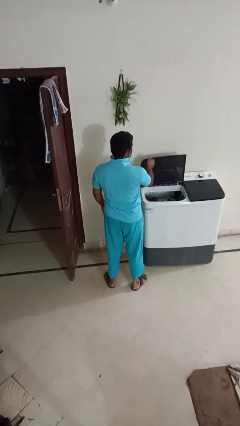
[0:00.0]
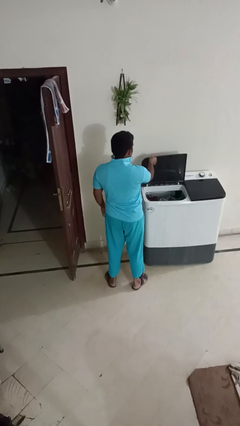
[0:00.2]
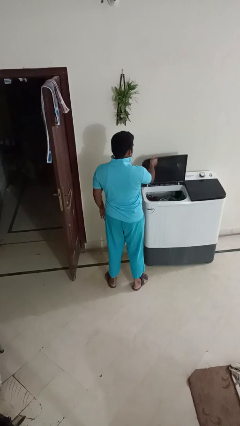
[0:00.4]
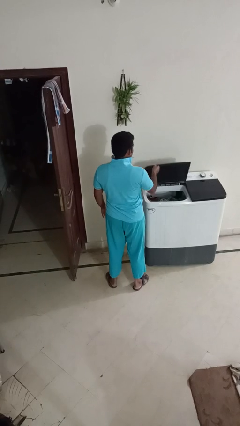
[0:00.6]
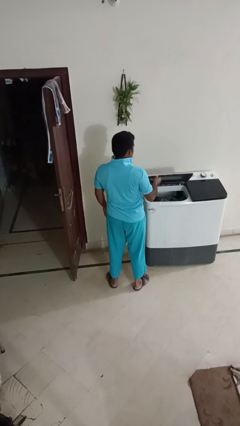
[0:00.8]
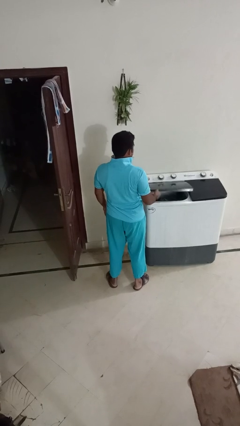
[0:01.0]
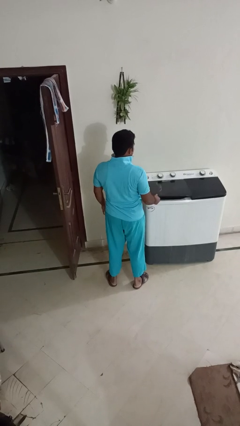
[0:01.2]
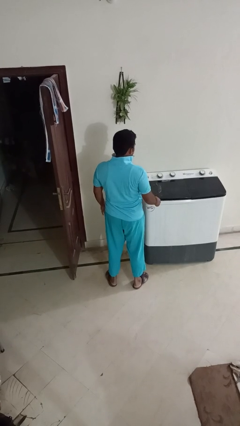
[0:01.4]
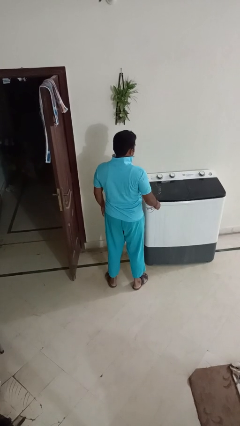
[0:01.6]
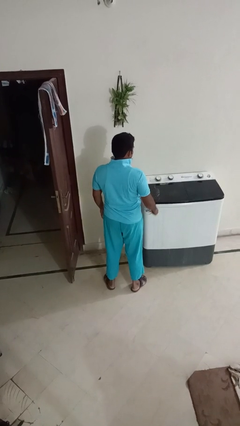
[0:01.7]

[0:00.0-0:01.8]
person closes clothes washer

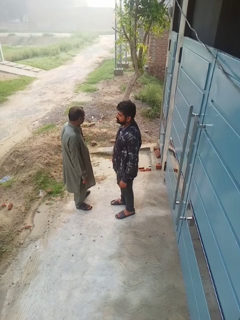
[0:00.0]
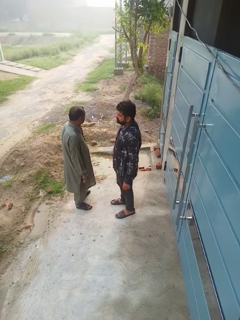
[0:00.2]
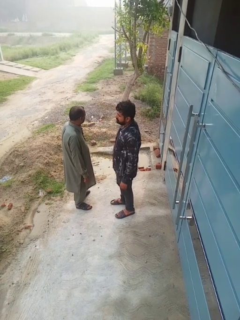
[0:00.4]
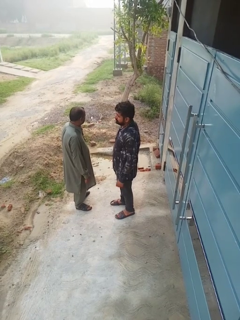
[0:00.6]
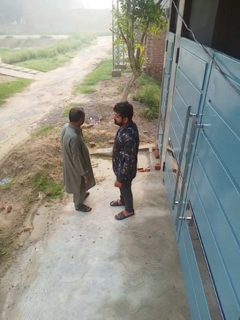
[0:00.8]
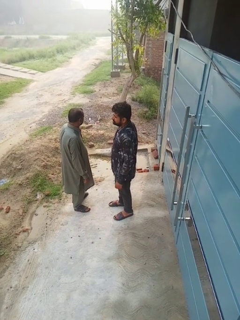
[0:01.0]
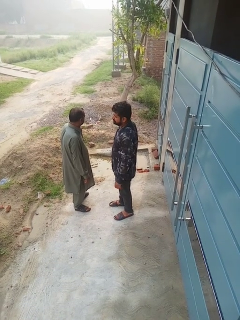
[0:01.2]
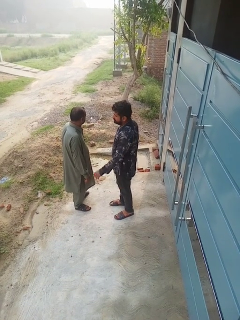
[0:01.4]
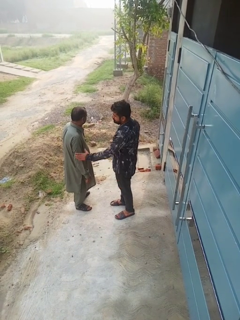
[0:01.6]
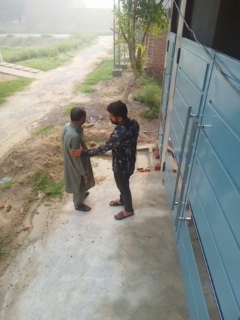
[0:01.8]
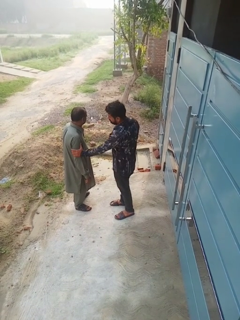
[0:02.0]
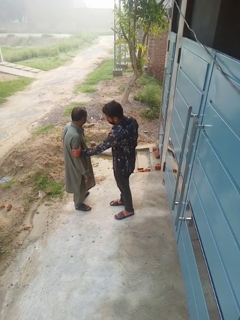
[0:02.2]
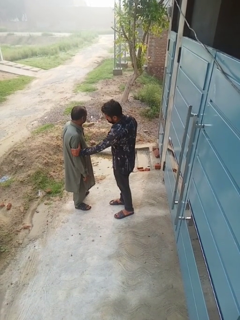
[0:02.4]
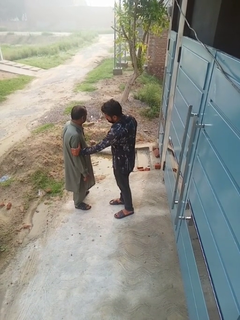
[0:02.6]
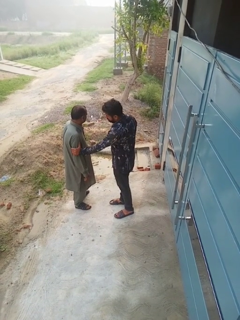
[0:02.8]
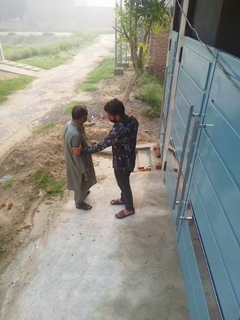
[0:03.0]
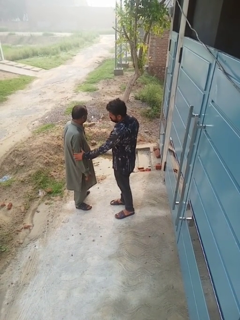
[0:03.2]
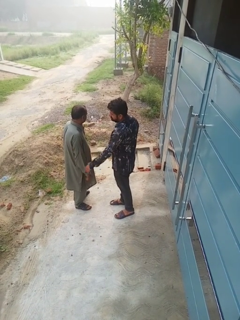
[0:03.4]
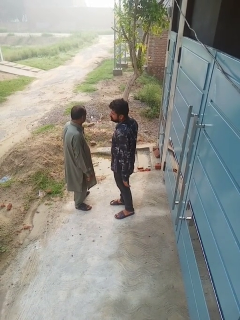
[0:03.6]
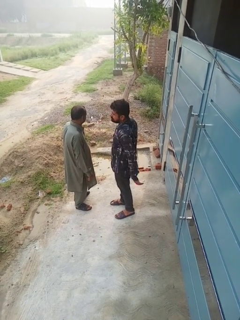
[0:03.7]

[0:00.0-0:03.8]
person grabs person by bicep

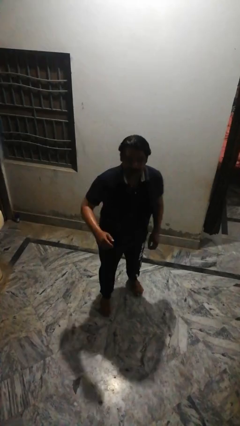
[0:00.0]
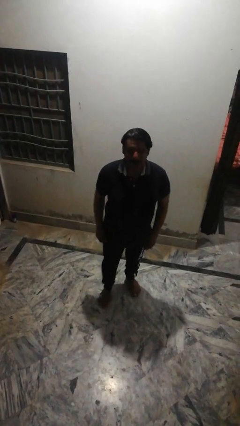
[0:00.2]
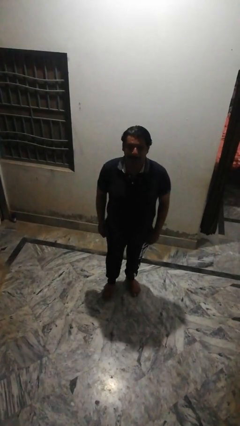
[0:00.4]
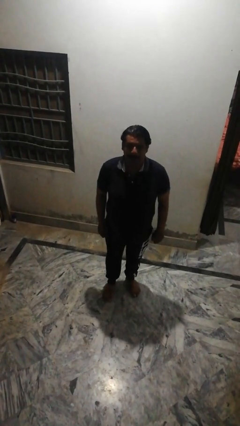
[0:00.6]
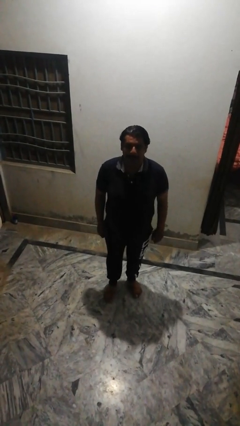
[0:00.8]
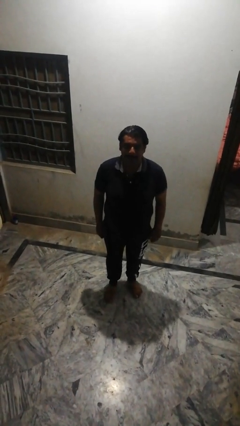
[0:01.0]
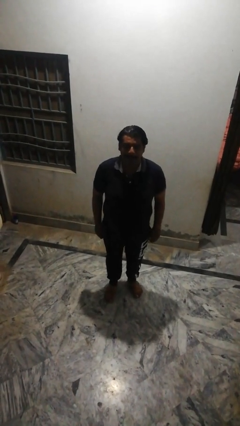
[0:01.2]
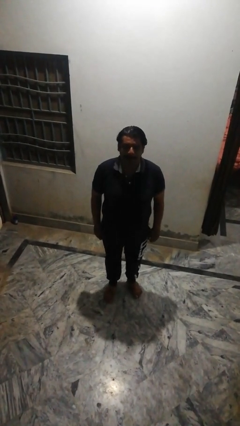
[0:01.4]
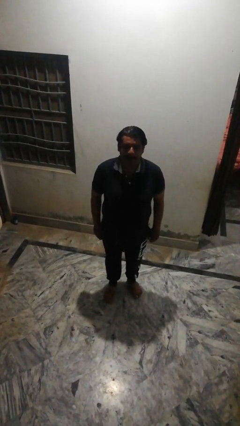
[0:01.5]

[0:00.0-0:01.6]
person karate chop

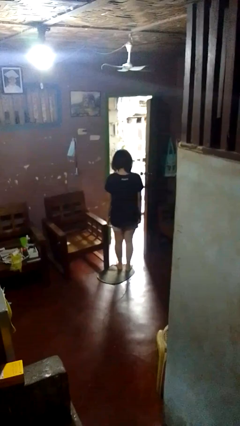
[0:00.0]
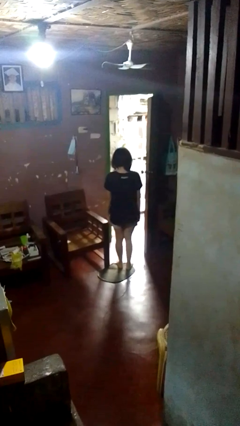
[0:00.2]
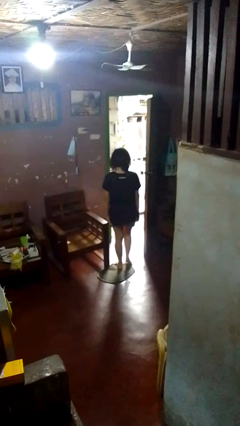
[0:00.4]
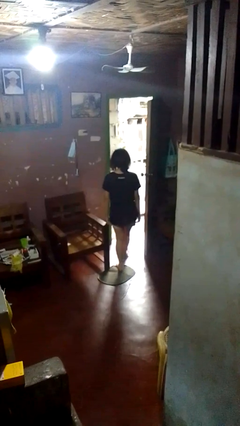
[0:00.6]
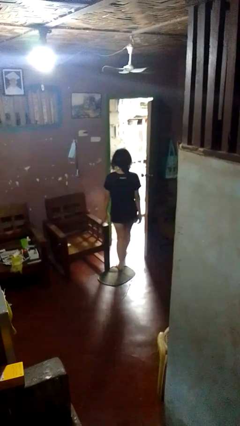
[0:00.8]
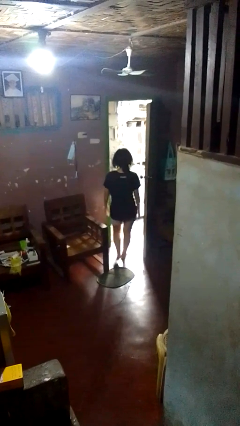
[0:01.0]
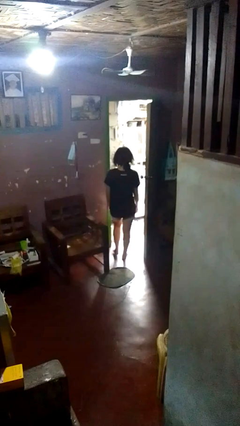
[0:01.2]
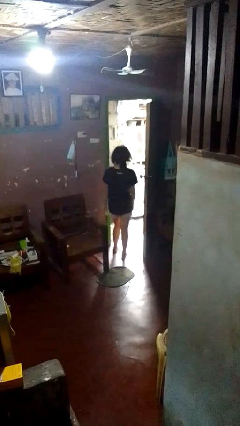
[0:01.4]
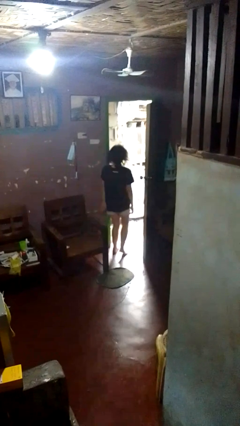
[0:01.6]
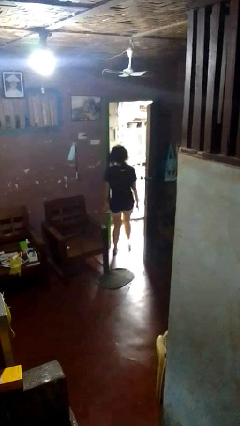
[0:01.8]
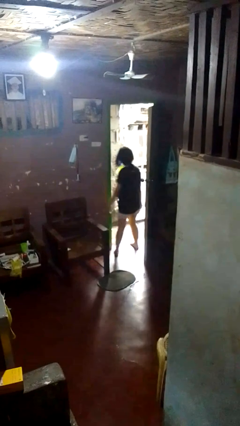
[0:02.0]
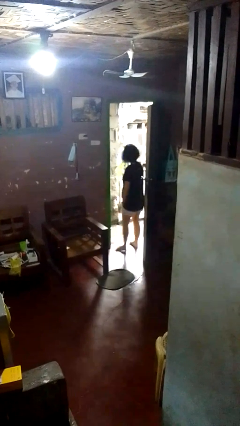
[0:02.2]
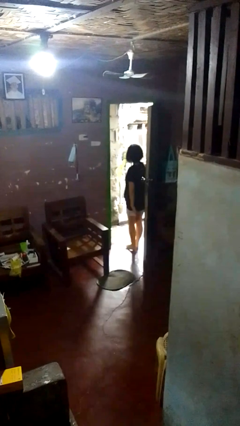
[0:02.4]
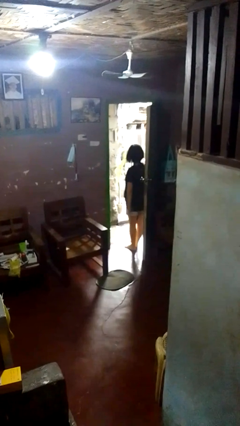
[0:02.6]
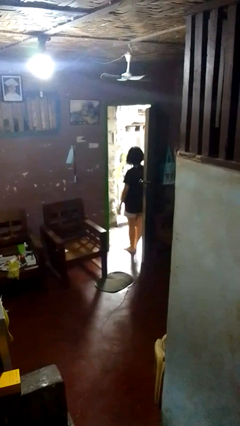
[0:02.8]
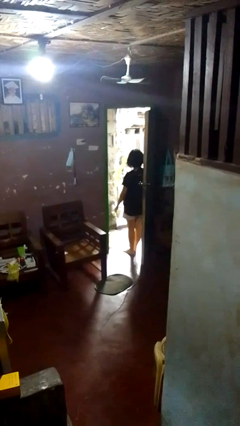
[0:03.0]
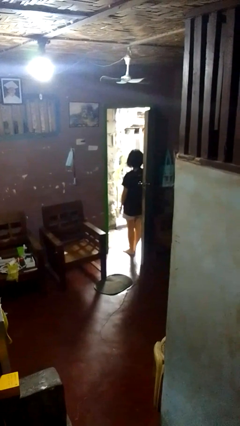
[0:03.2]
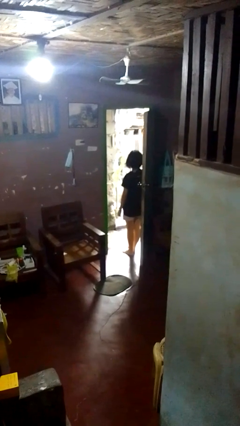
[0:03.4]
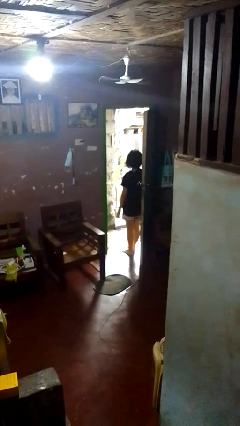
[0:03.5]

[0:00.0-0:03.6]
person bumps into wall

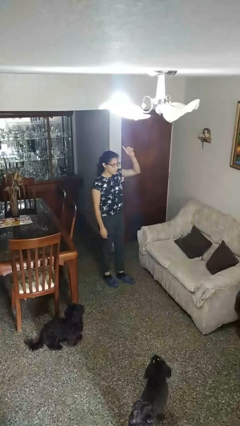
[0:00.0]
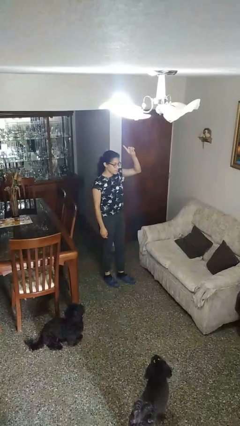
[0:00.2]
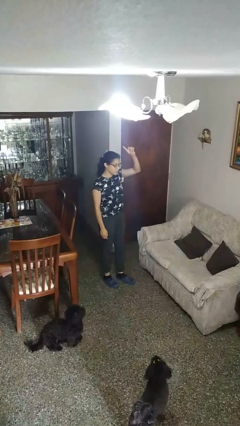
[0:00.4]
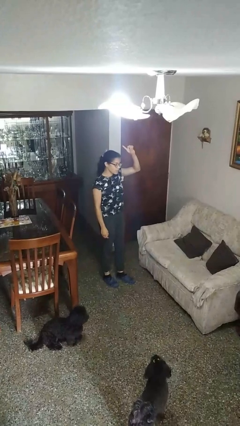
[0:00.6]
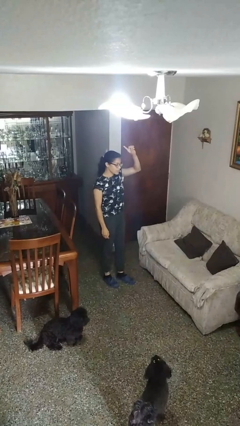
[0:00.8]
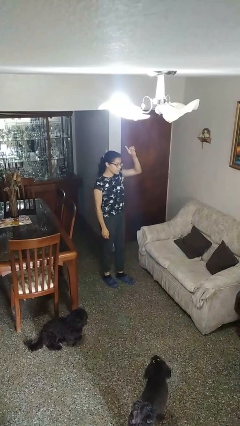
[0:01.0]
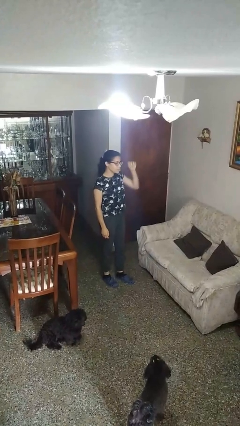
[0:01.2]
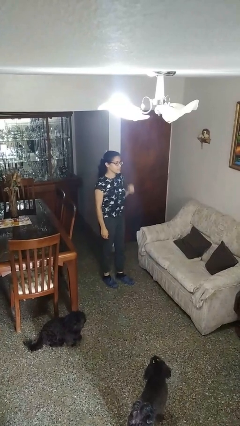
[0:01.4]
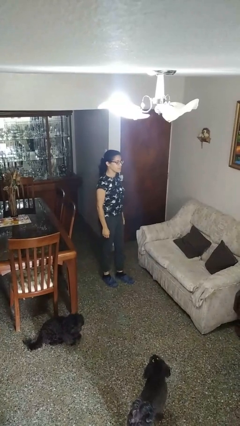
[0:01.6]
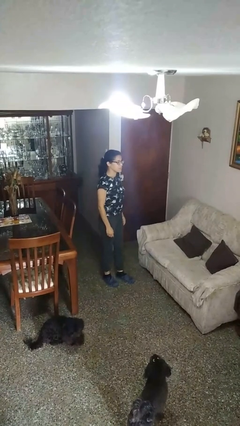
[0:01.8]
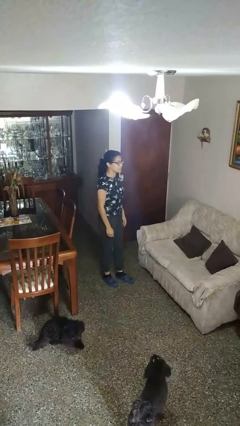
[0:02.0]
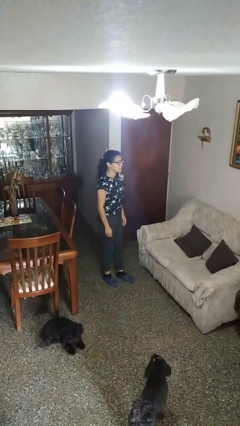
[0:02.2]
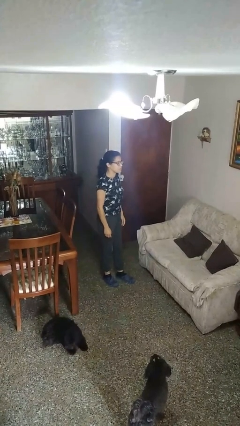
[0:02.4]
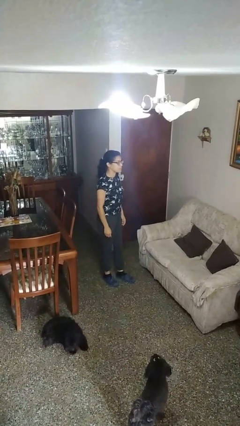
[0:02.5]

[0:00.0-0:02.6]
person gestures raise hand

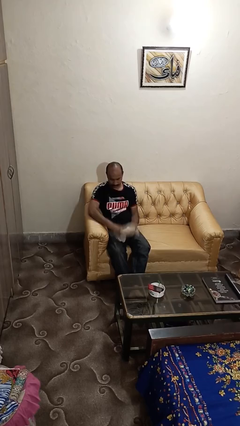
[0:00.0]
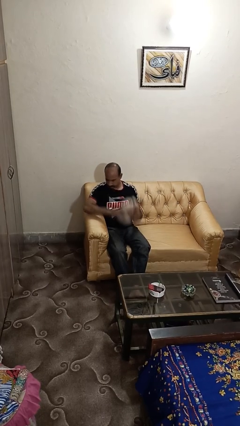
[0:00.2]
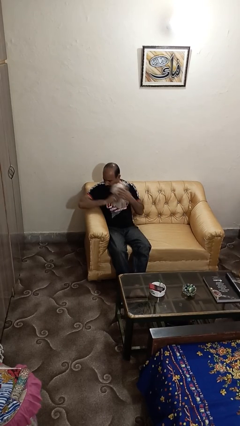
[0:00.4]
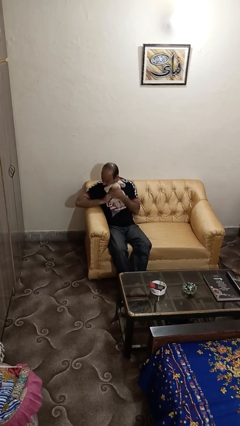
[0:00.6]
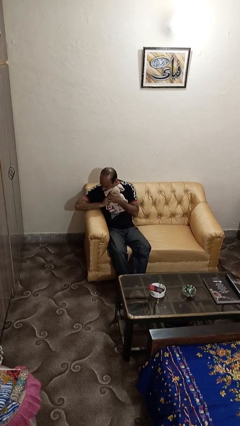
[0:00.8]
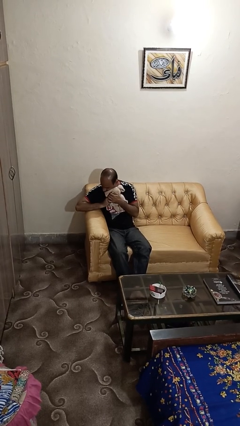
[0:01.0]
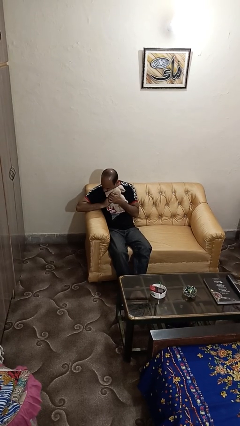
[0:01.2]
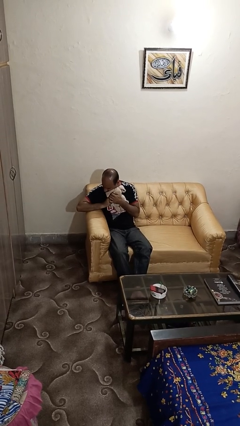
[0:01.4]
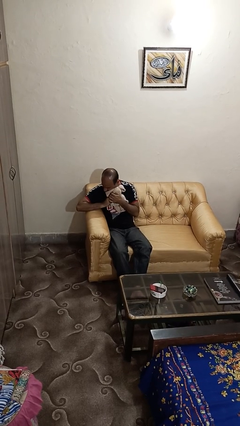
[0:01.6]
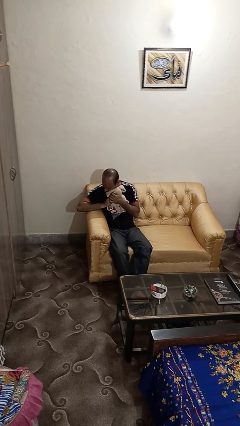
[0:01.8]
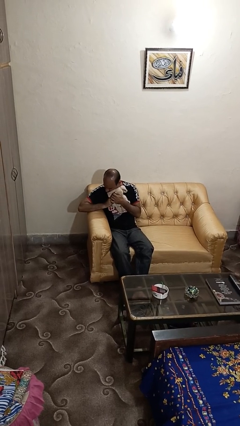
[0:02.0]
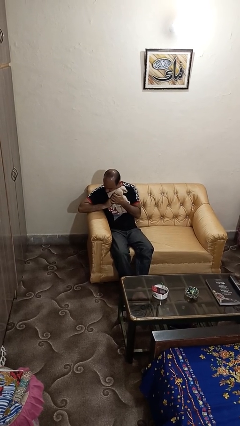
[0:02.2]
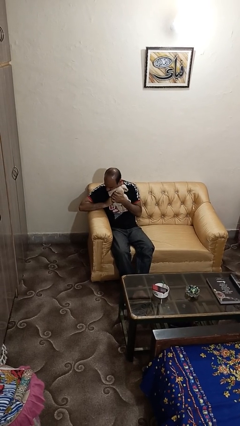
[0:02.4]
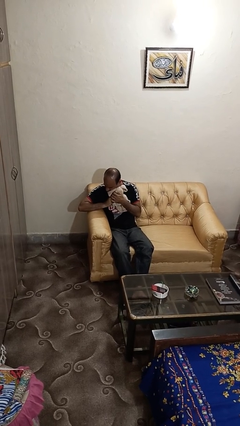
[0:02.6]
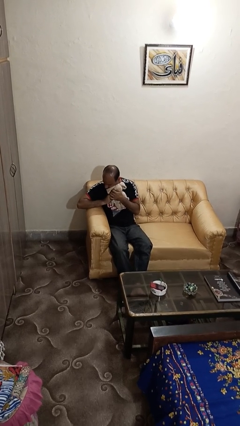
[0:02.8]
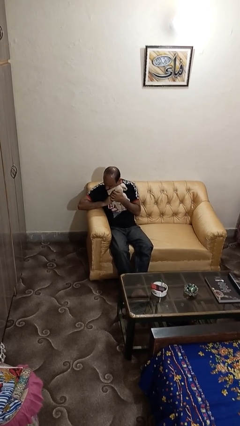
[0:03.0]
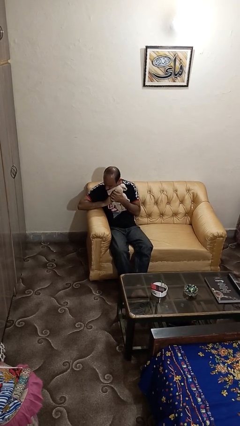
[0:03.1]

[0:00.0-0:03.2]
person hugs stuffed animal

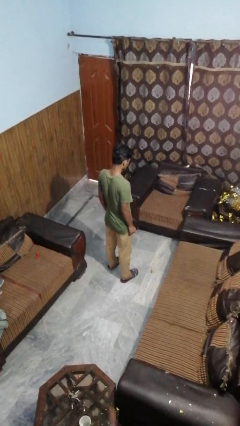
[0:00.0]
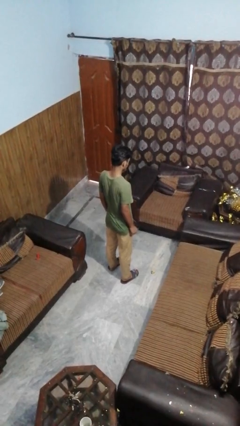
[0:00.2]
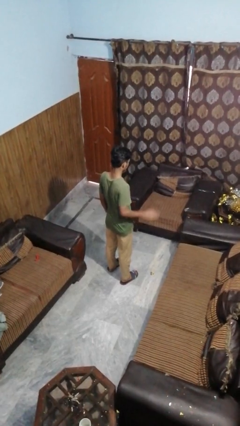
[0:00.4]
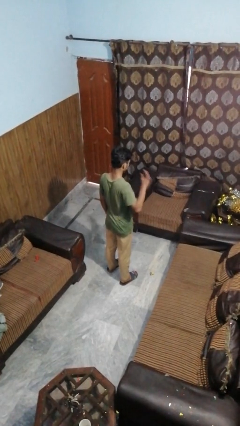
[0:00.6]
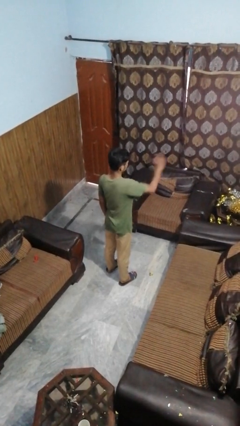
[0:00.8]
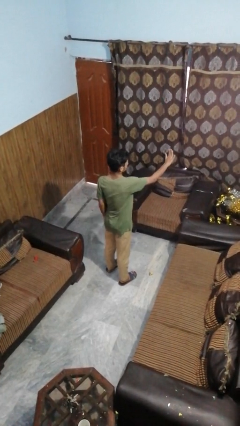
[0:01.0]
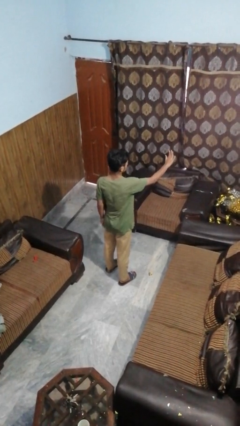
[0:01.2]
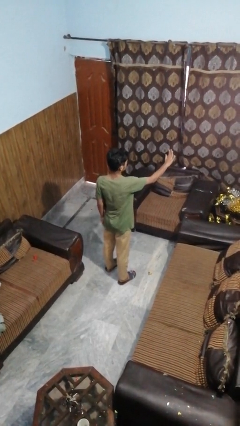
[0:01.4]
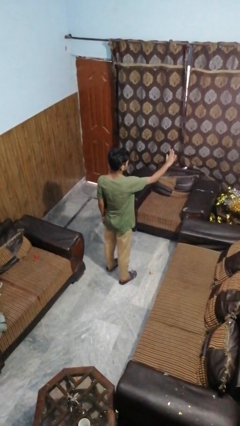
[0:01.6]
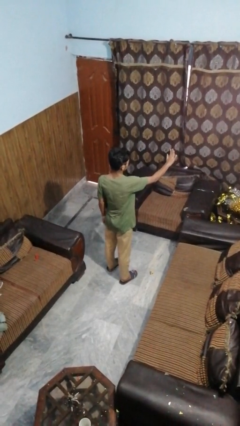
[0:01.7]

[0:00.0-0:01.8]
person gestures stop
